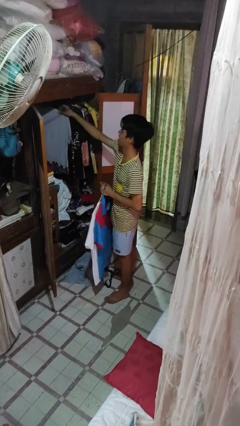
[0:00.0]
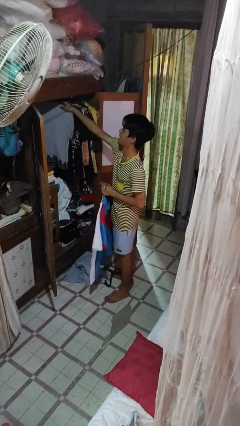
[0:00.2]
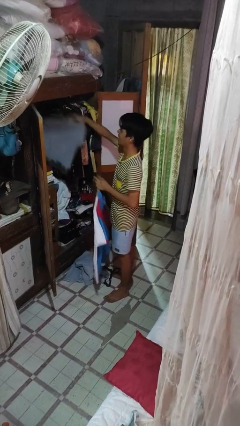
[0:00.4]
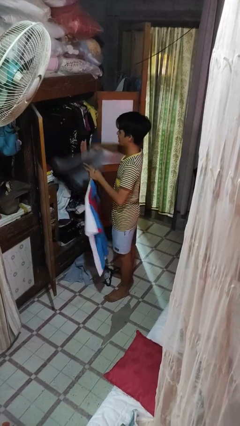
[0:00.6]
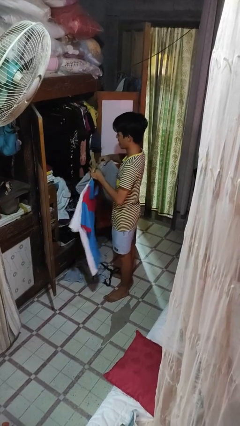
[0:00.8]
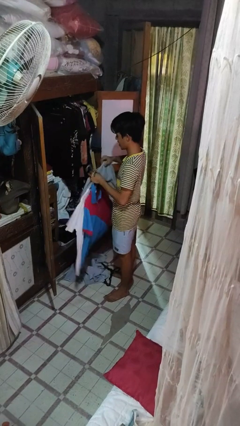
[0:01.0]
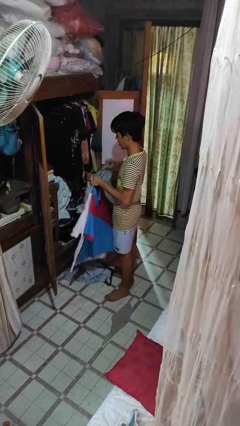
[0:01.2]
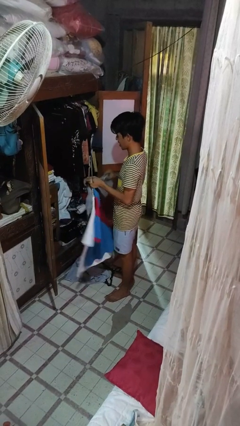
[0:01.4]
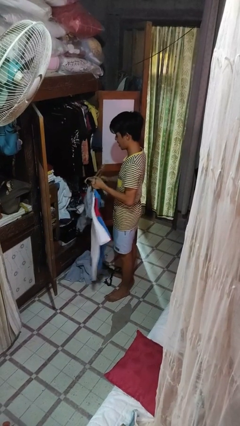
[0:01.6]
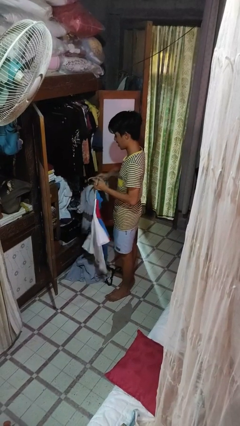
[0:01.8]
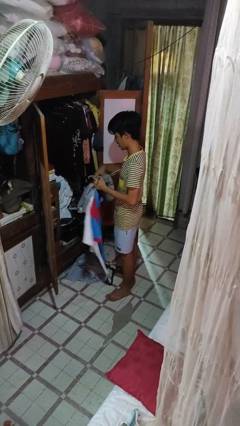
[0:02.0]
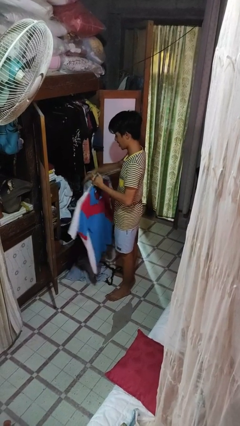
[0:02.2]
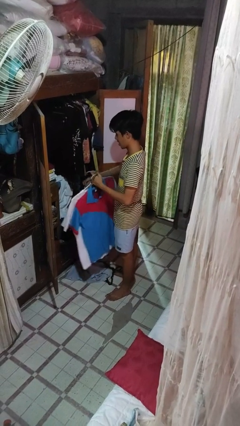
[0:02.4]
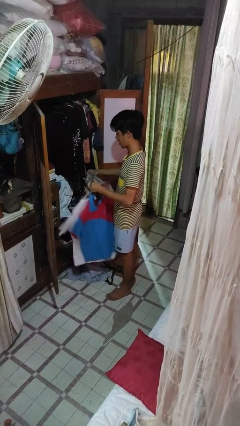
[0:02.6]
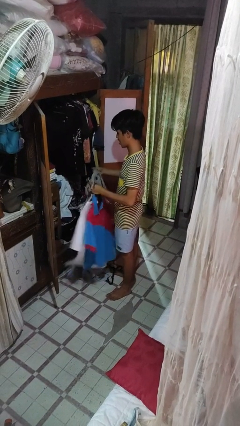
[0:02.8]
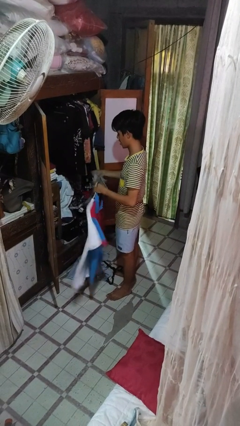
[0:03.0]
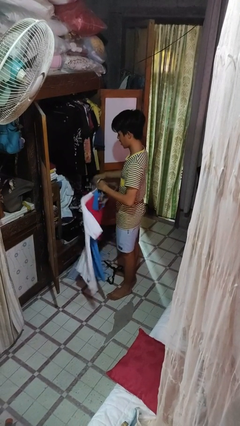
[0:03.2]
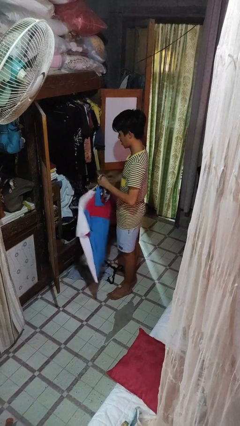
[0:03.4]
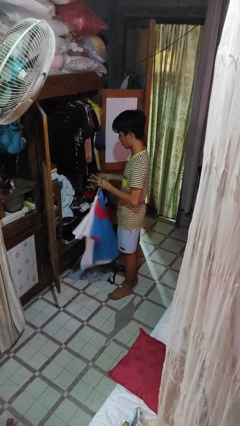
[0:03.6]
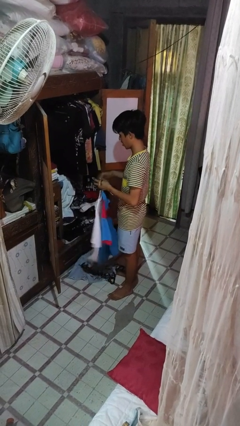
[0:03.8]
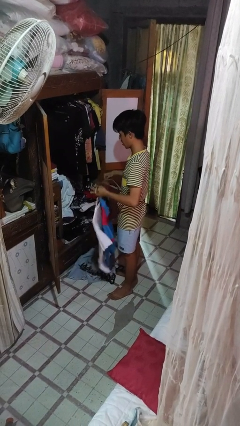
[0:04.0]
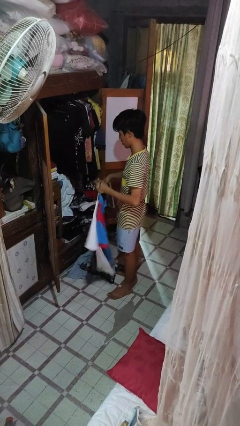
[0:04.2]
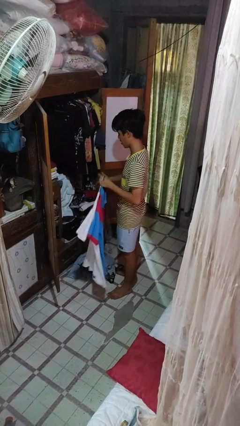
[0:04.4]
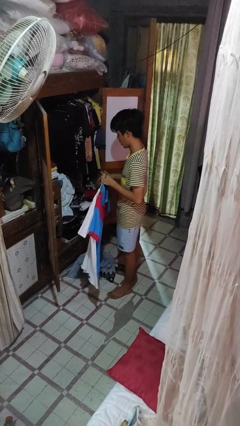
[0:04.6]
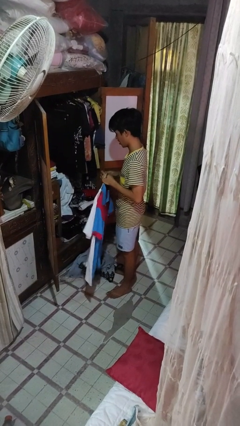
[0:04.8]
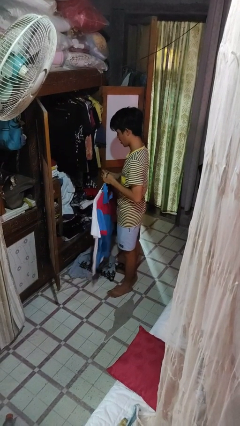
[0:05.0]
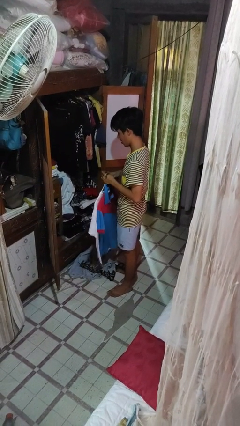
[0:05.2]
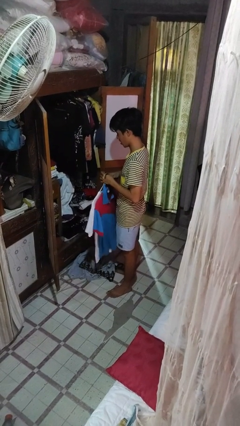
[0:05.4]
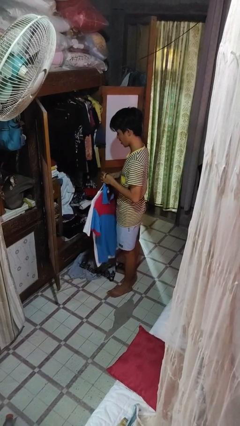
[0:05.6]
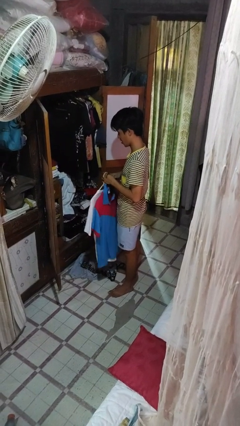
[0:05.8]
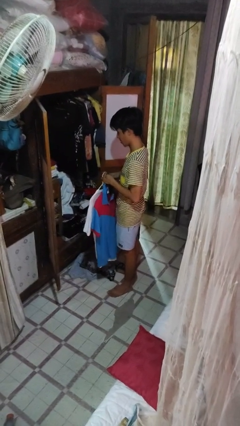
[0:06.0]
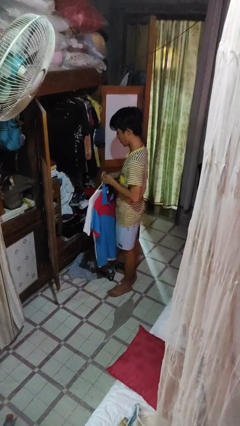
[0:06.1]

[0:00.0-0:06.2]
person takes clothes from closet

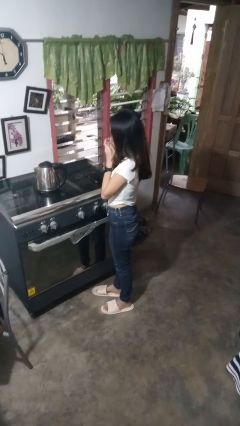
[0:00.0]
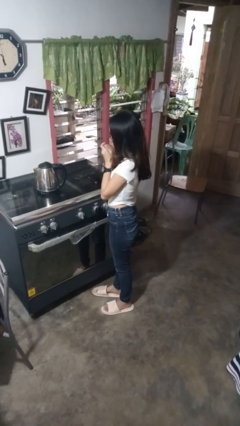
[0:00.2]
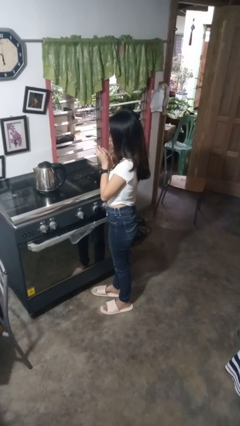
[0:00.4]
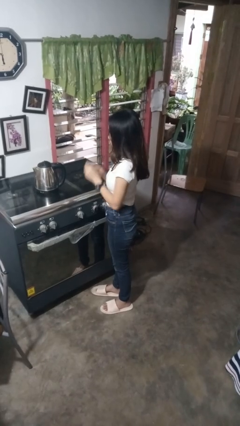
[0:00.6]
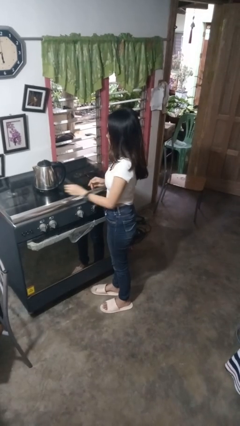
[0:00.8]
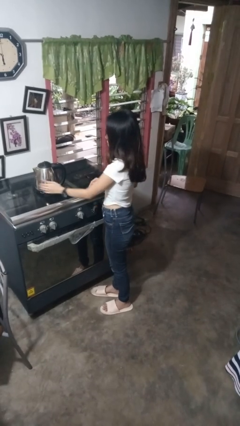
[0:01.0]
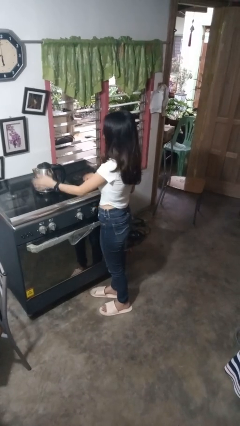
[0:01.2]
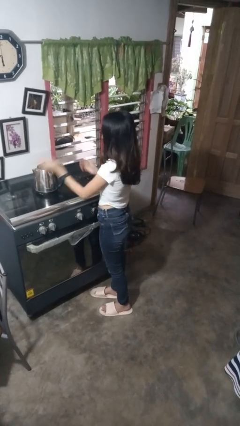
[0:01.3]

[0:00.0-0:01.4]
person burns hand

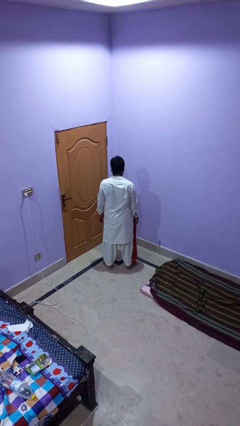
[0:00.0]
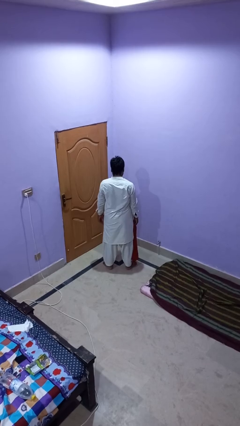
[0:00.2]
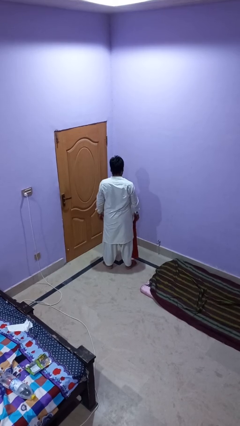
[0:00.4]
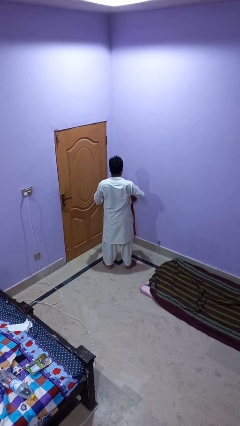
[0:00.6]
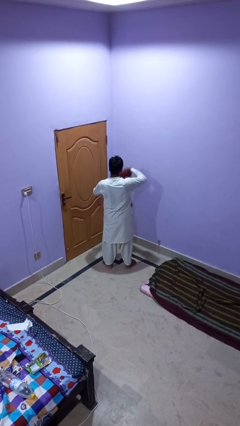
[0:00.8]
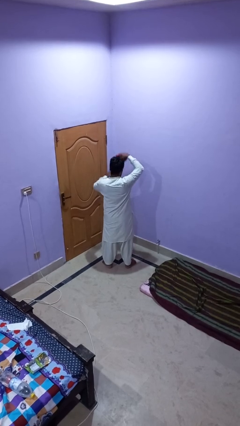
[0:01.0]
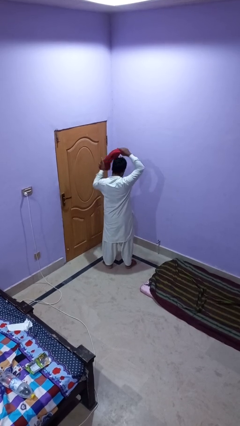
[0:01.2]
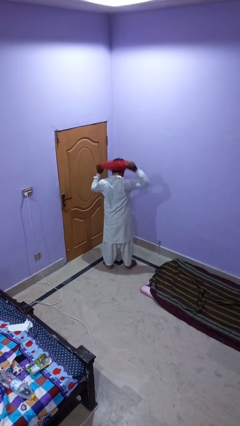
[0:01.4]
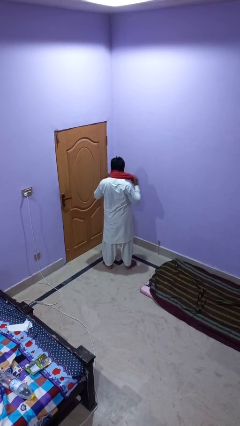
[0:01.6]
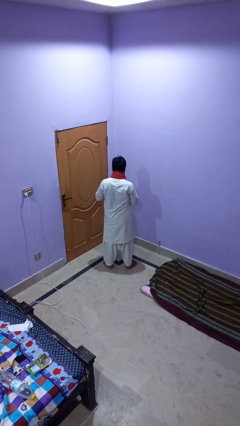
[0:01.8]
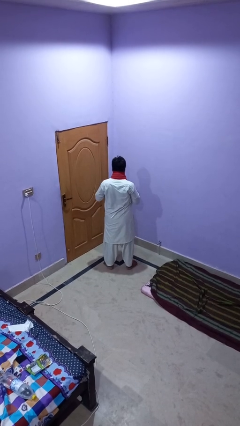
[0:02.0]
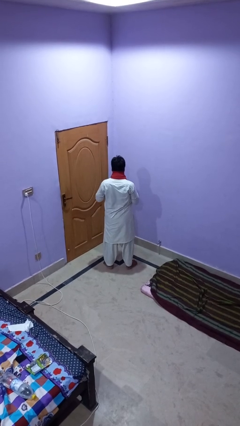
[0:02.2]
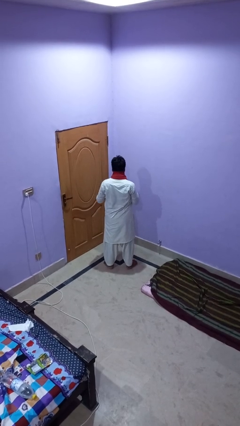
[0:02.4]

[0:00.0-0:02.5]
person puts on scarf

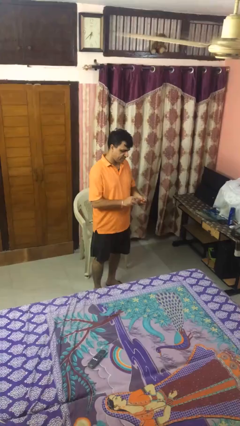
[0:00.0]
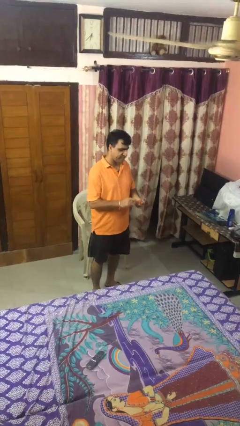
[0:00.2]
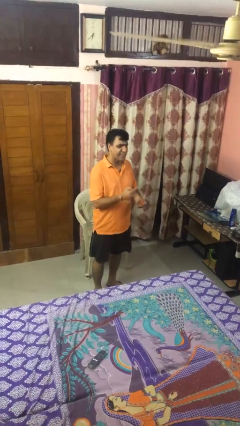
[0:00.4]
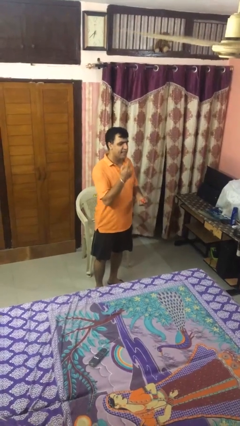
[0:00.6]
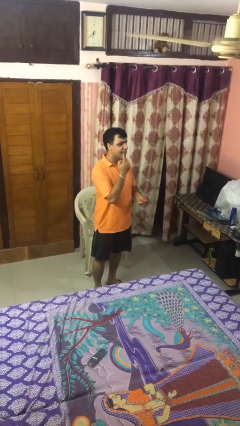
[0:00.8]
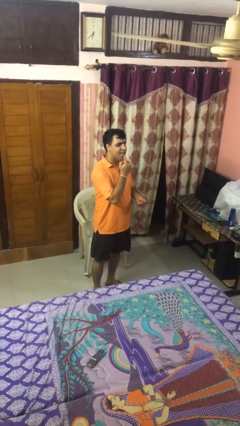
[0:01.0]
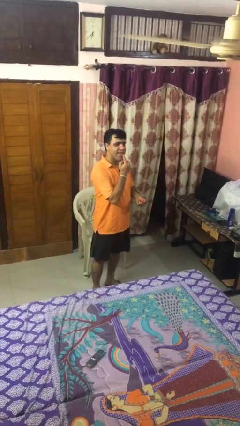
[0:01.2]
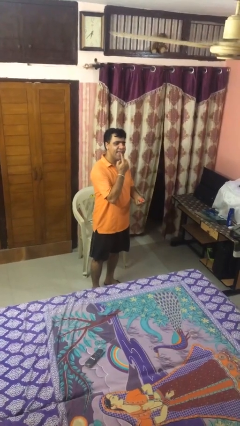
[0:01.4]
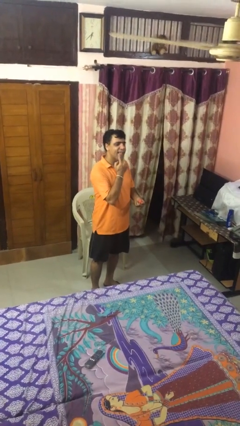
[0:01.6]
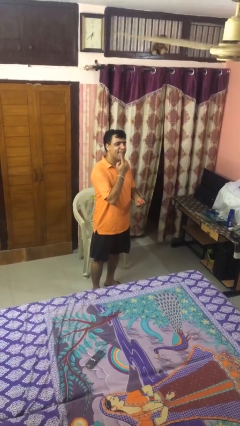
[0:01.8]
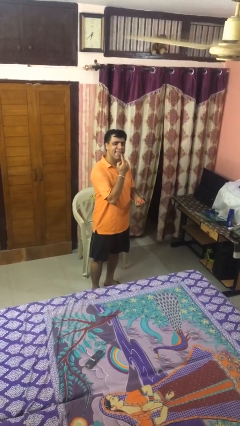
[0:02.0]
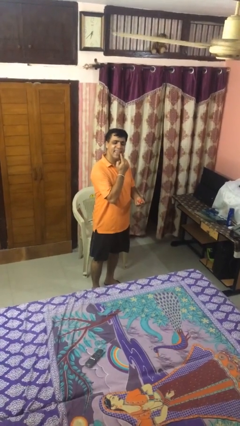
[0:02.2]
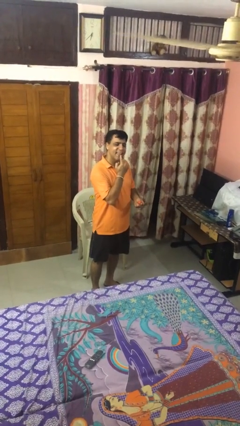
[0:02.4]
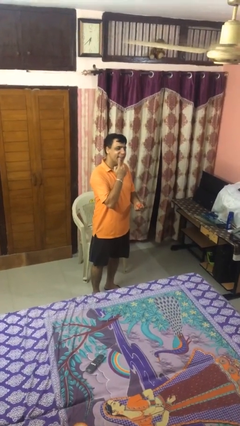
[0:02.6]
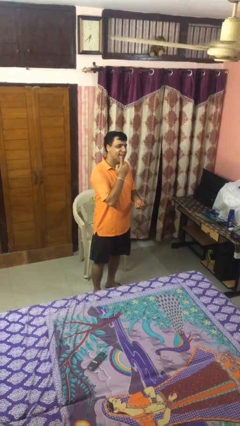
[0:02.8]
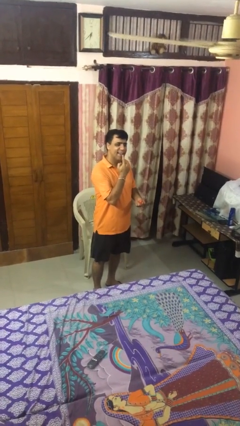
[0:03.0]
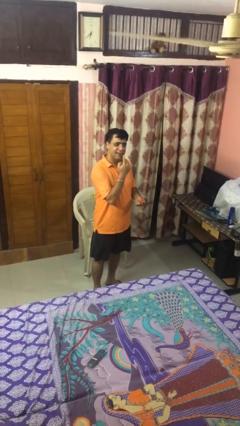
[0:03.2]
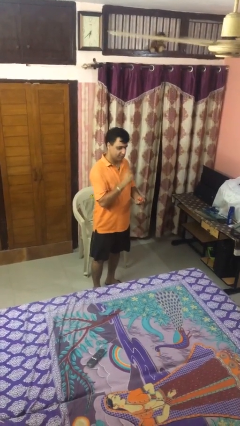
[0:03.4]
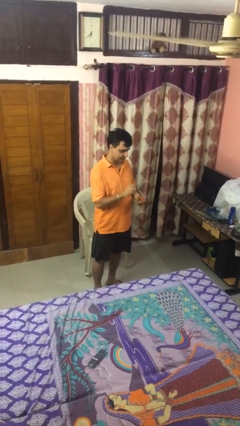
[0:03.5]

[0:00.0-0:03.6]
person applies lip makeup

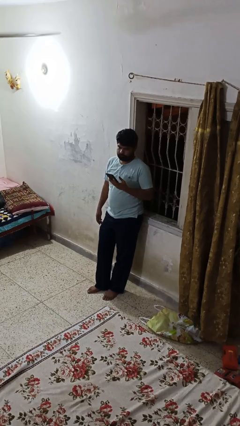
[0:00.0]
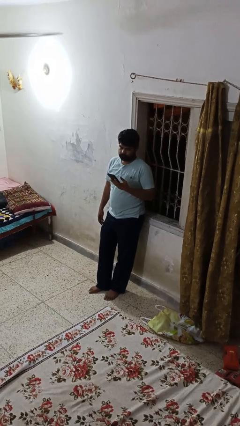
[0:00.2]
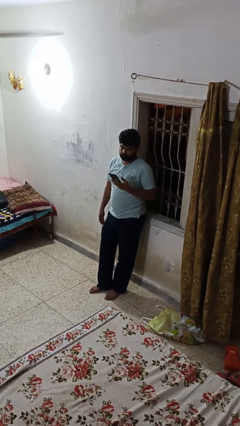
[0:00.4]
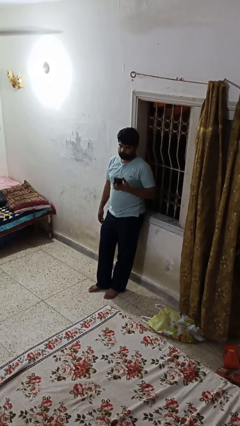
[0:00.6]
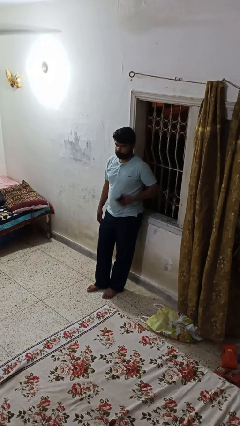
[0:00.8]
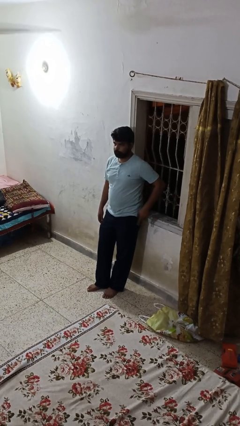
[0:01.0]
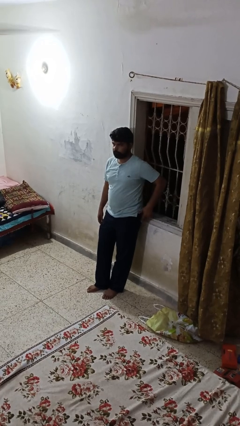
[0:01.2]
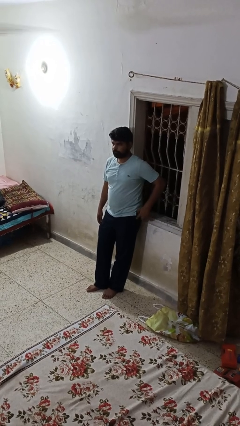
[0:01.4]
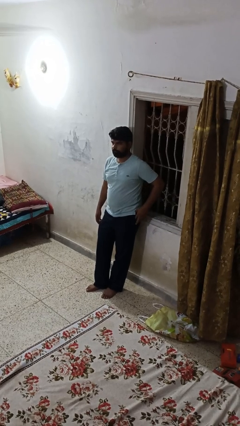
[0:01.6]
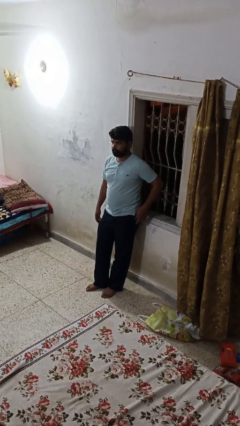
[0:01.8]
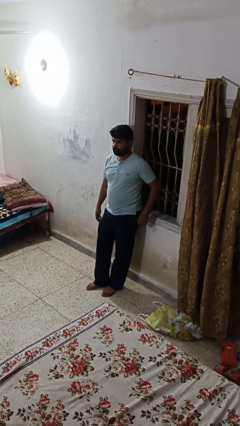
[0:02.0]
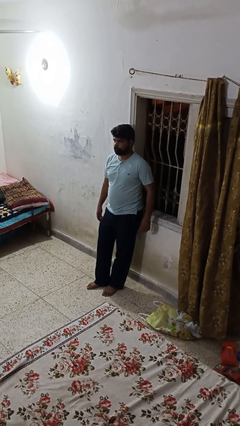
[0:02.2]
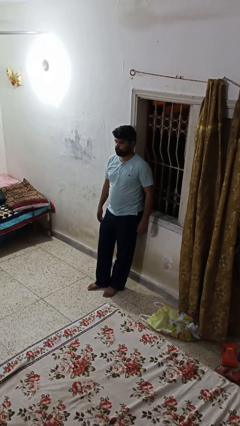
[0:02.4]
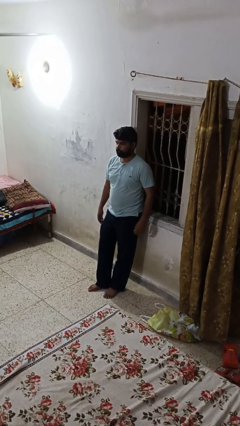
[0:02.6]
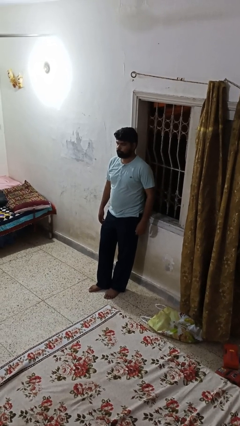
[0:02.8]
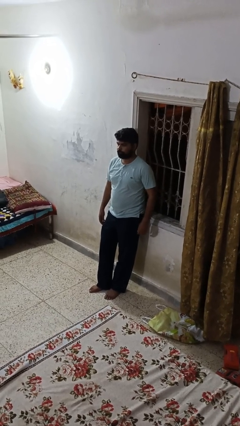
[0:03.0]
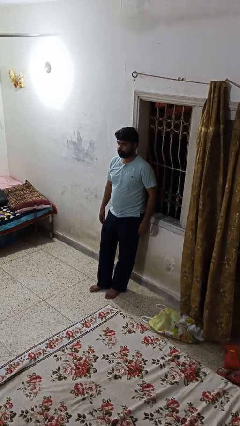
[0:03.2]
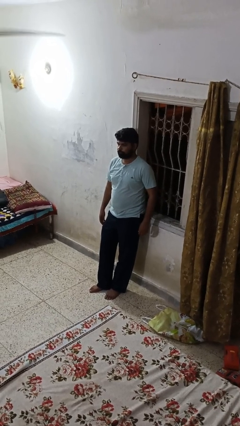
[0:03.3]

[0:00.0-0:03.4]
person puts phone into pocket

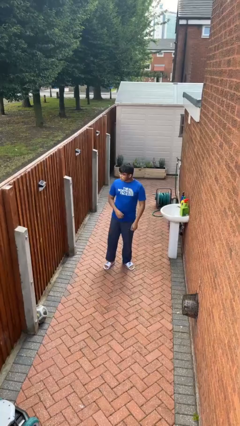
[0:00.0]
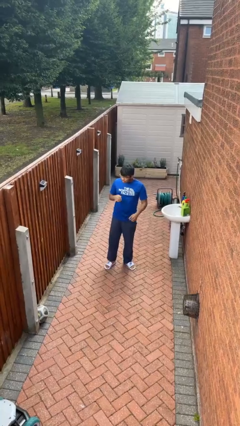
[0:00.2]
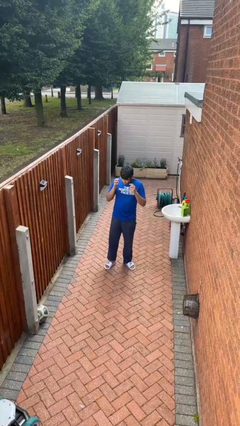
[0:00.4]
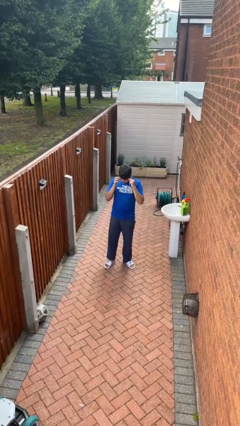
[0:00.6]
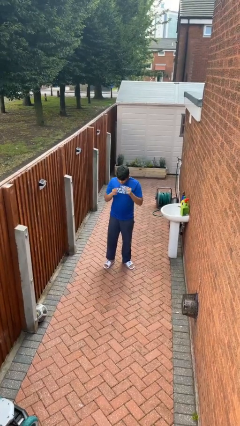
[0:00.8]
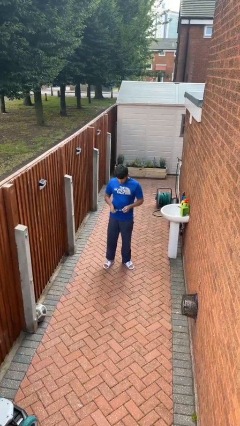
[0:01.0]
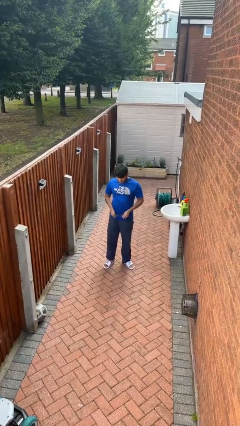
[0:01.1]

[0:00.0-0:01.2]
person takes off glasses
